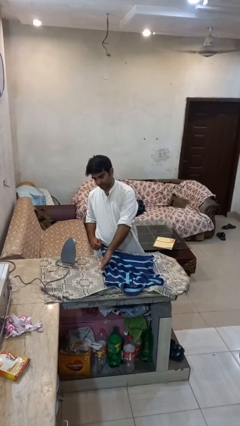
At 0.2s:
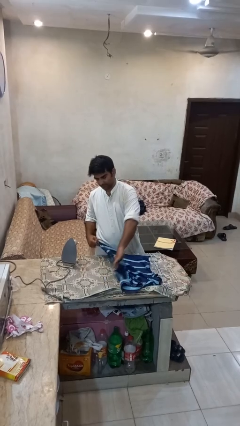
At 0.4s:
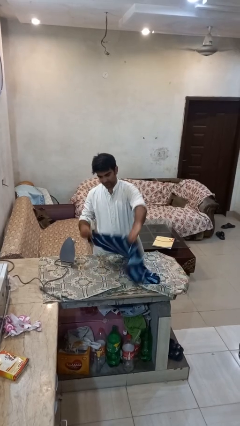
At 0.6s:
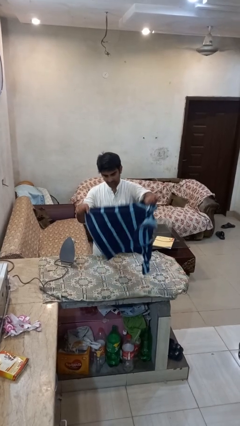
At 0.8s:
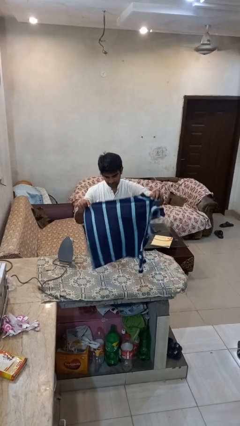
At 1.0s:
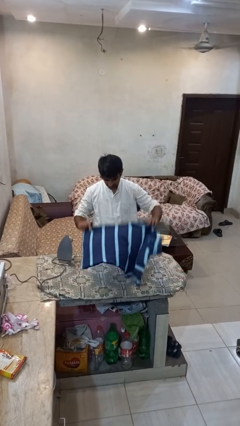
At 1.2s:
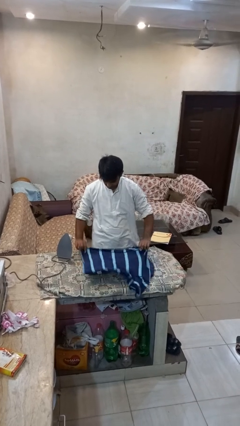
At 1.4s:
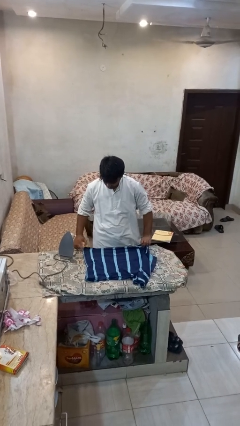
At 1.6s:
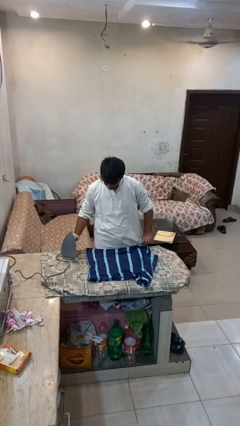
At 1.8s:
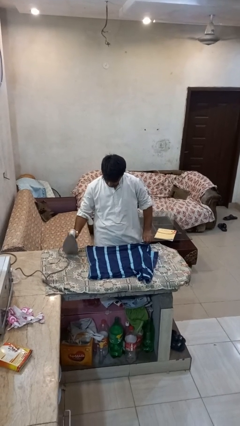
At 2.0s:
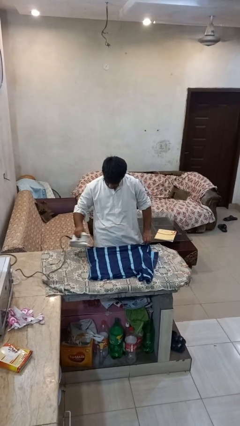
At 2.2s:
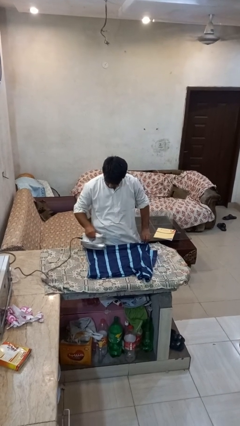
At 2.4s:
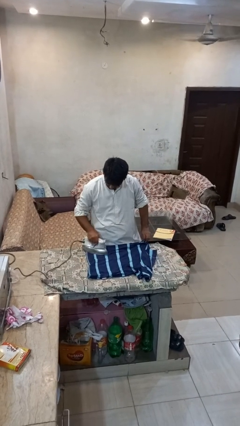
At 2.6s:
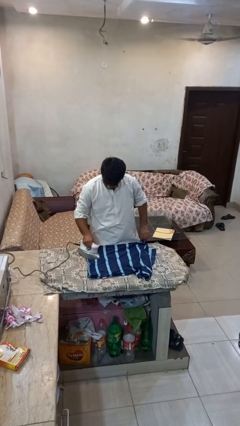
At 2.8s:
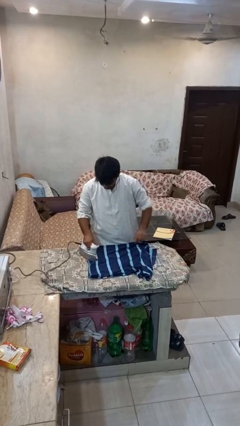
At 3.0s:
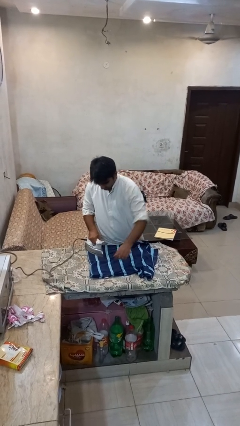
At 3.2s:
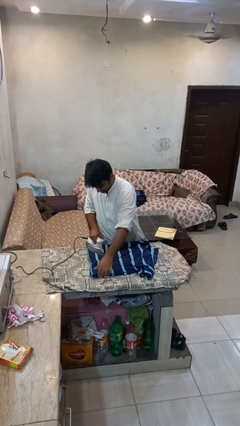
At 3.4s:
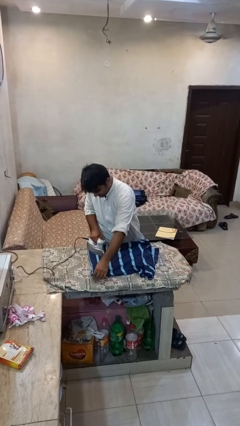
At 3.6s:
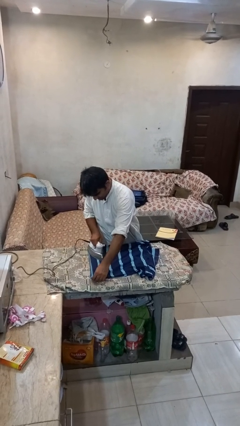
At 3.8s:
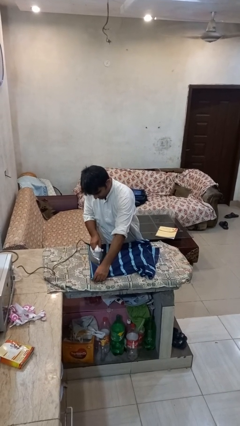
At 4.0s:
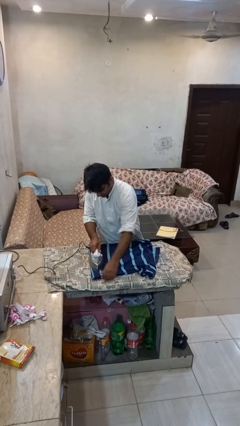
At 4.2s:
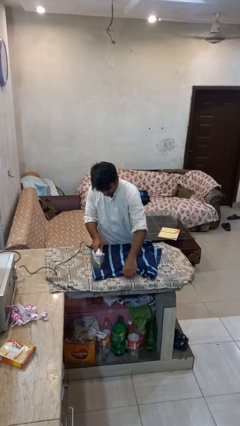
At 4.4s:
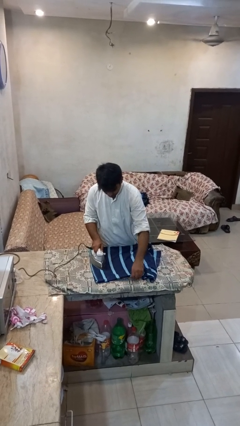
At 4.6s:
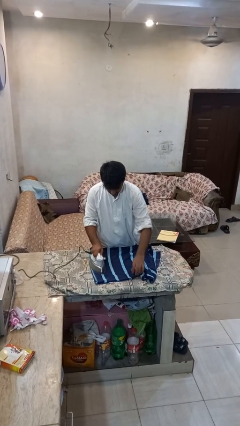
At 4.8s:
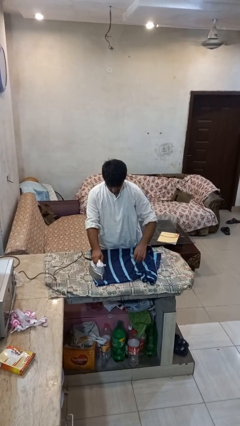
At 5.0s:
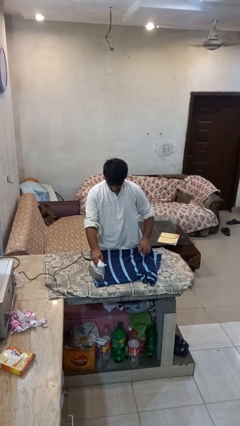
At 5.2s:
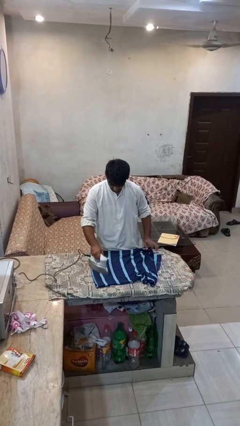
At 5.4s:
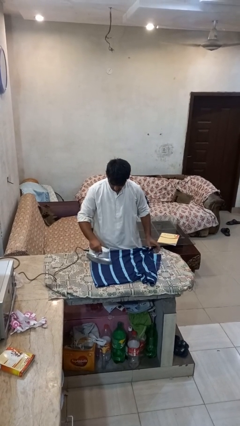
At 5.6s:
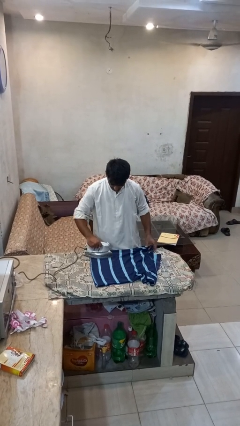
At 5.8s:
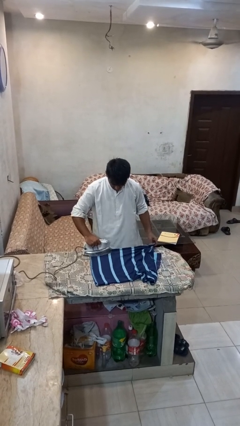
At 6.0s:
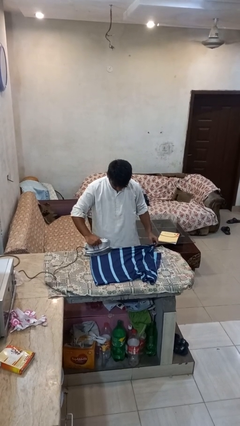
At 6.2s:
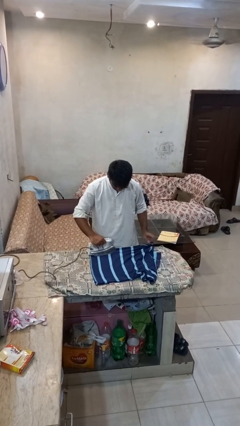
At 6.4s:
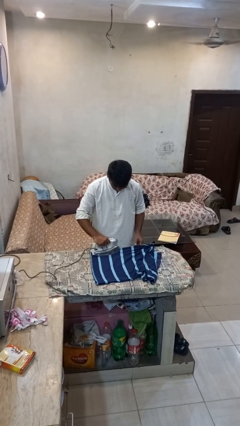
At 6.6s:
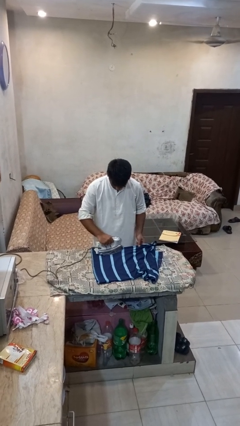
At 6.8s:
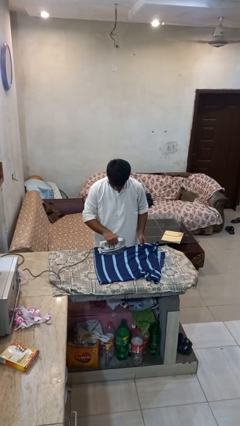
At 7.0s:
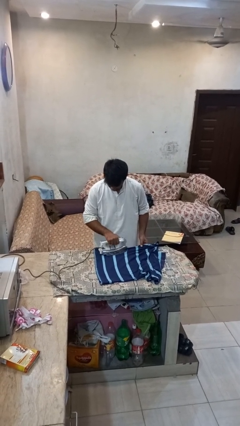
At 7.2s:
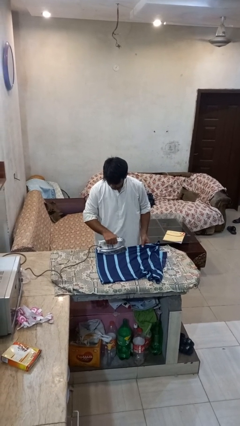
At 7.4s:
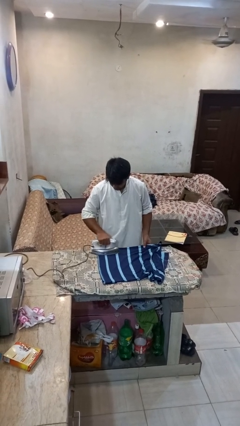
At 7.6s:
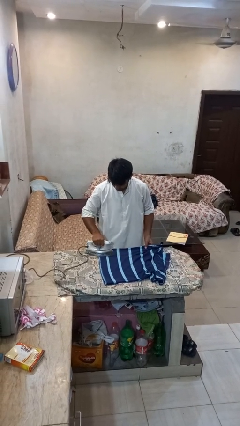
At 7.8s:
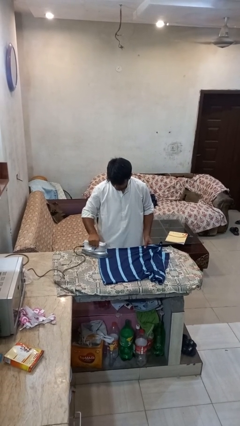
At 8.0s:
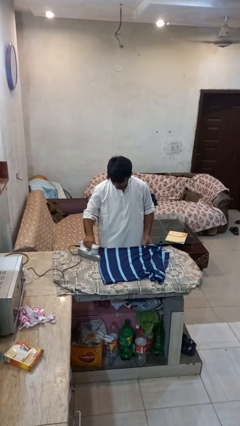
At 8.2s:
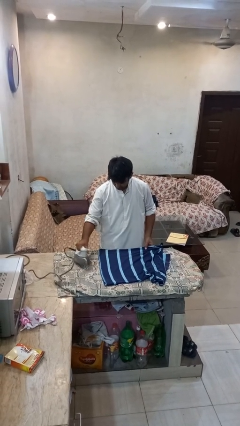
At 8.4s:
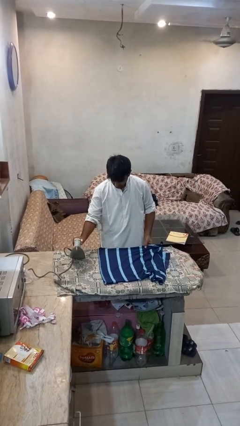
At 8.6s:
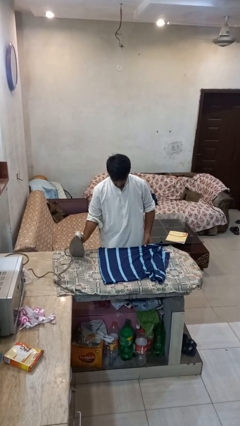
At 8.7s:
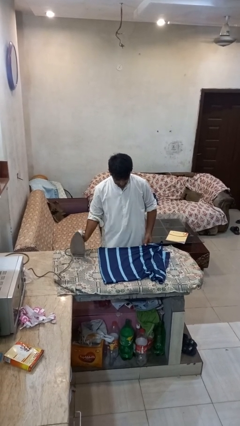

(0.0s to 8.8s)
person irons clothes

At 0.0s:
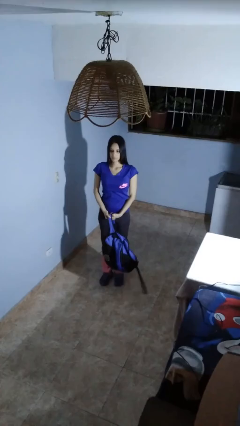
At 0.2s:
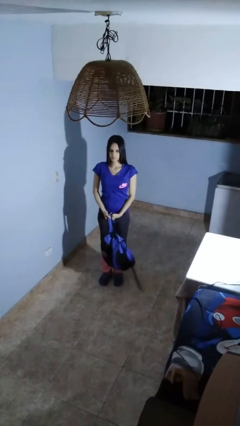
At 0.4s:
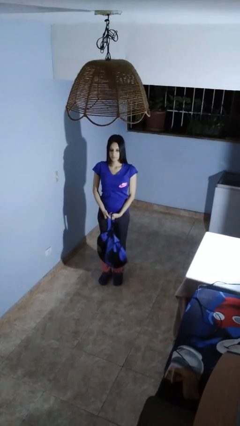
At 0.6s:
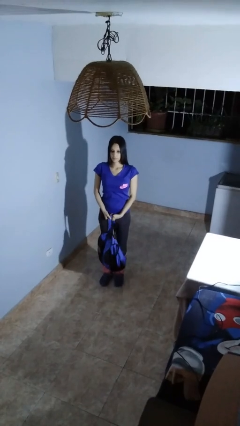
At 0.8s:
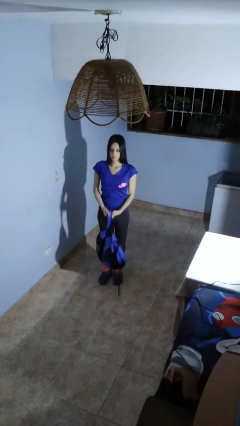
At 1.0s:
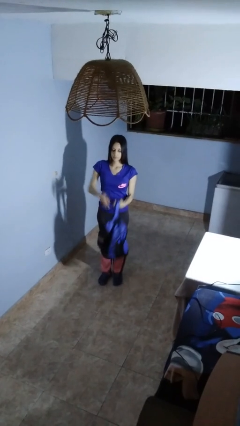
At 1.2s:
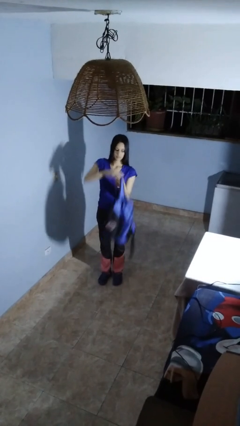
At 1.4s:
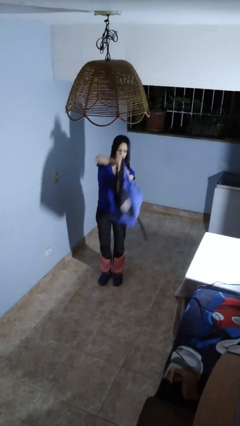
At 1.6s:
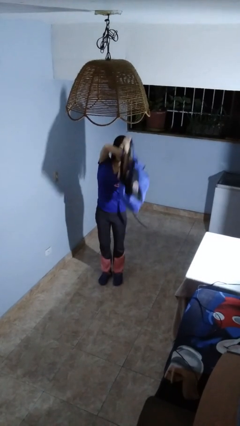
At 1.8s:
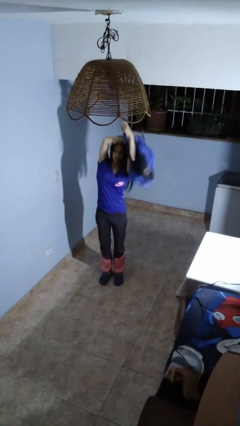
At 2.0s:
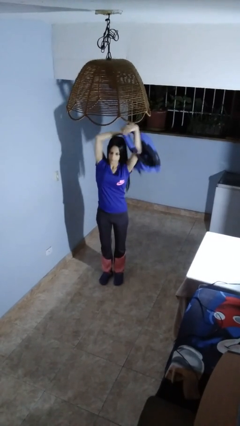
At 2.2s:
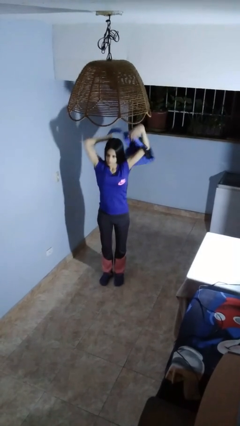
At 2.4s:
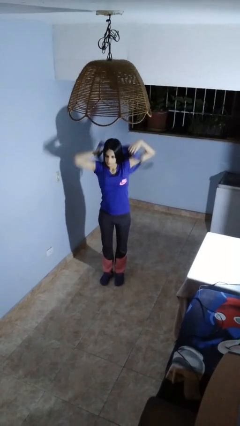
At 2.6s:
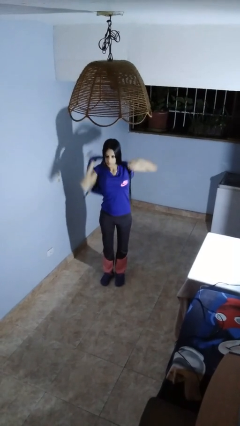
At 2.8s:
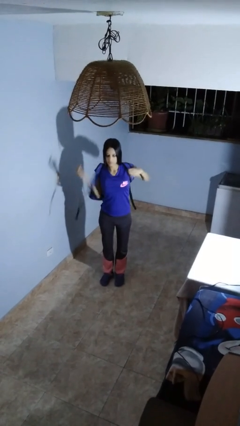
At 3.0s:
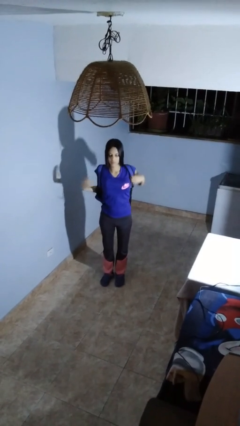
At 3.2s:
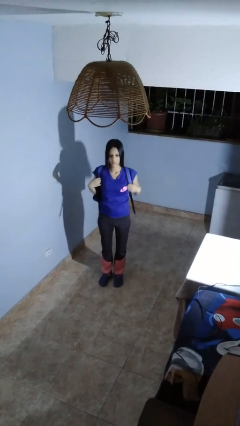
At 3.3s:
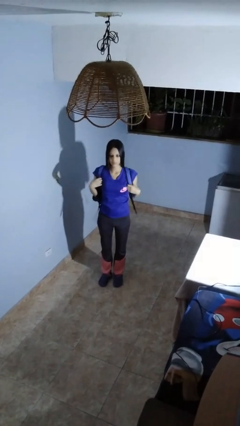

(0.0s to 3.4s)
person puts on backpack

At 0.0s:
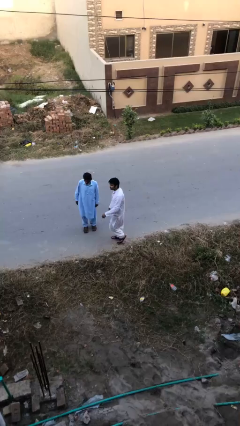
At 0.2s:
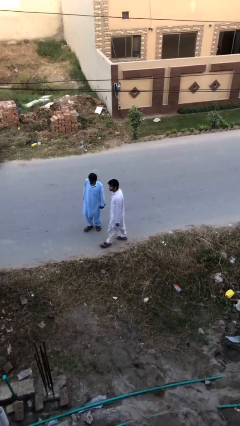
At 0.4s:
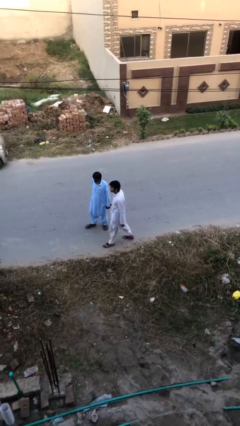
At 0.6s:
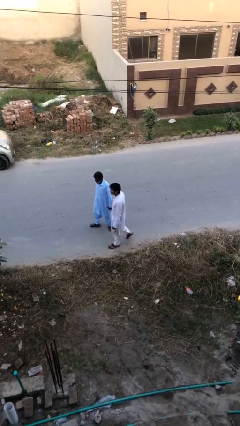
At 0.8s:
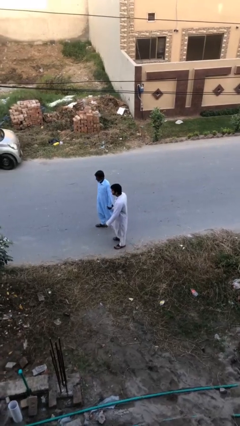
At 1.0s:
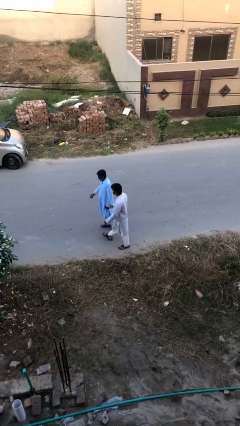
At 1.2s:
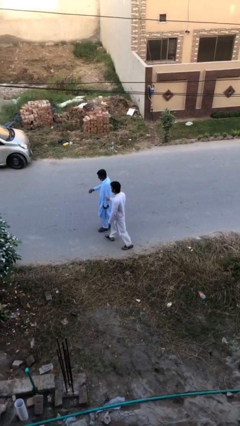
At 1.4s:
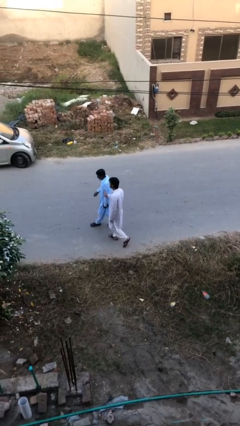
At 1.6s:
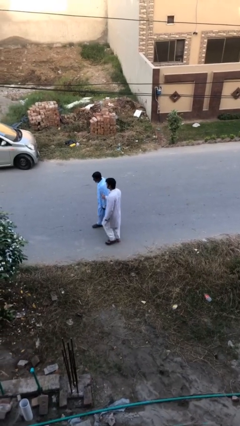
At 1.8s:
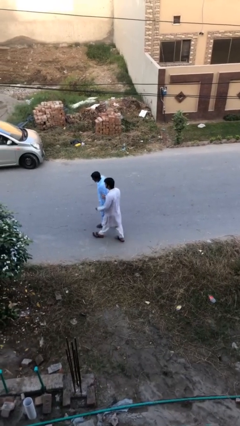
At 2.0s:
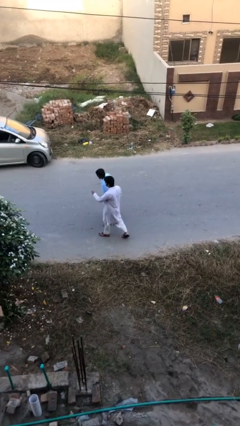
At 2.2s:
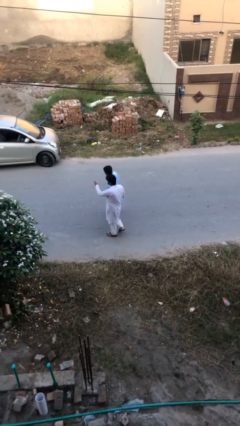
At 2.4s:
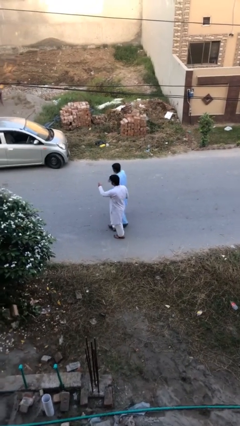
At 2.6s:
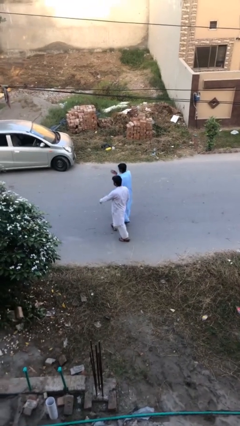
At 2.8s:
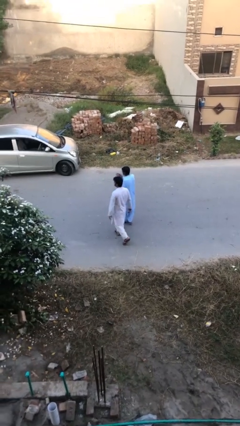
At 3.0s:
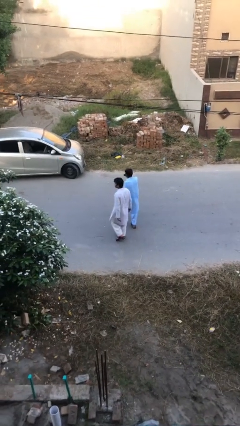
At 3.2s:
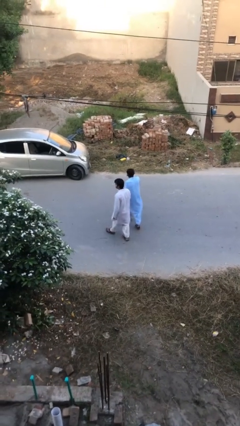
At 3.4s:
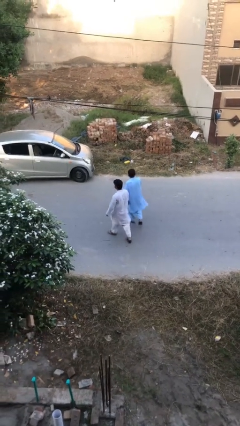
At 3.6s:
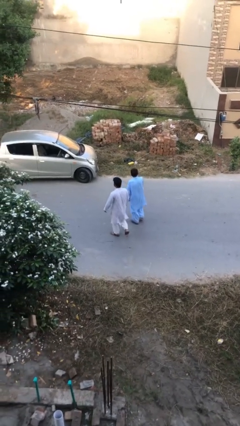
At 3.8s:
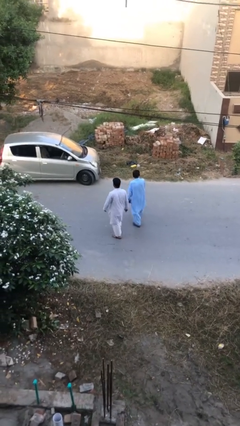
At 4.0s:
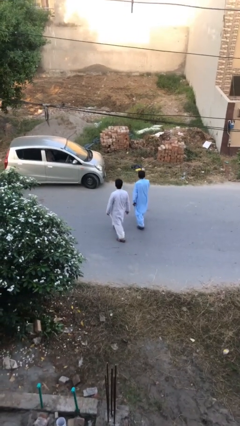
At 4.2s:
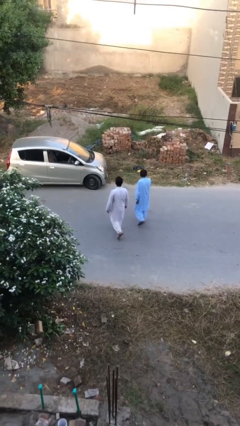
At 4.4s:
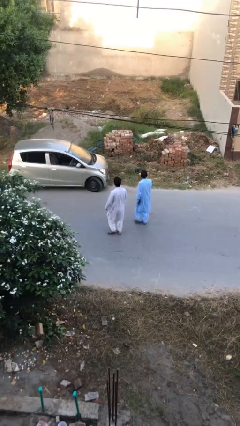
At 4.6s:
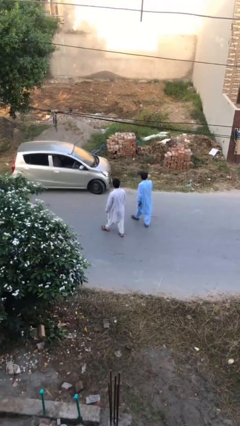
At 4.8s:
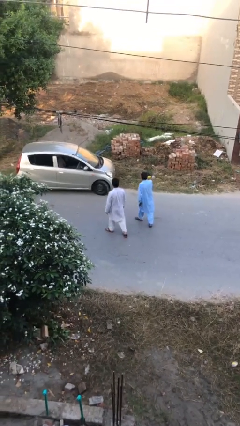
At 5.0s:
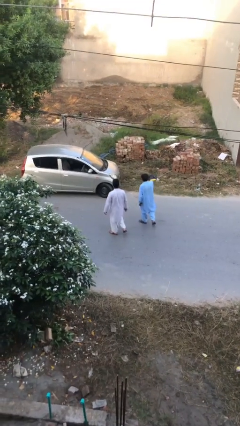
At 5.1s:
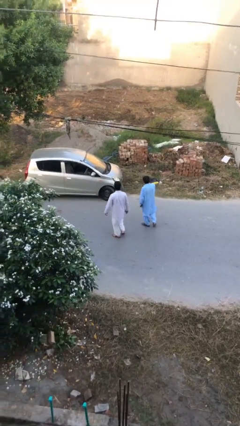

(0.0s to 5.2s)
person talks to person

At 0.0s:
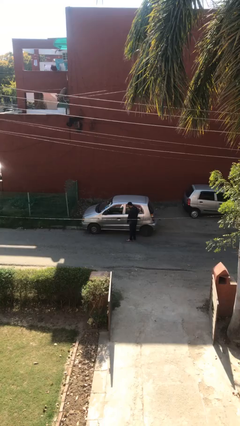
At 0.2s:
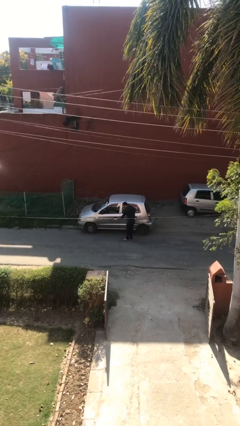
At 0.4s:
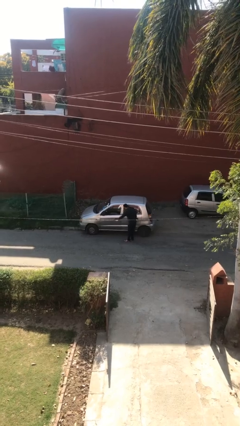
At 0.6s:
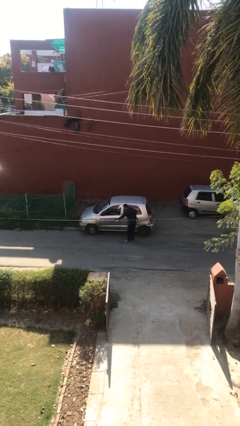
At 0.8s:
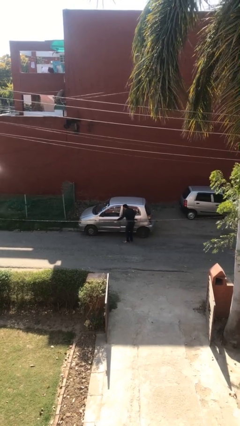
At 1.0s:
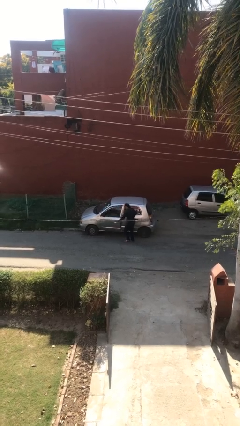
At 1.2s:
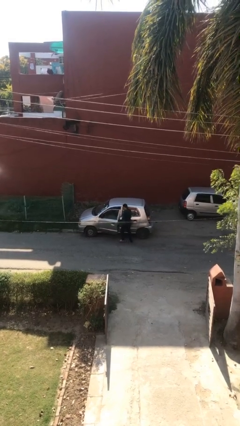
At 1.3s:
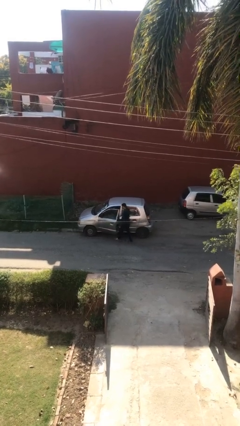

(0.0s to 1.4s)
car drops off person
